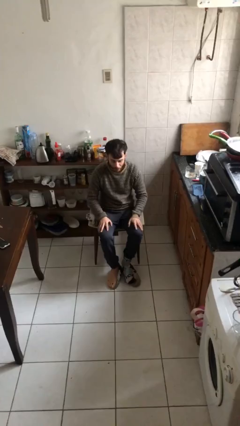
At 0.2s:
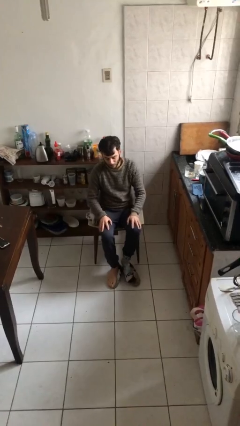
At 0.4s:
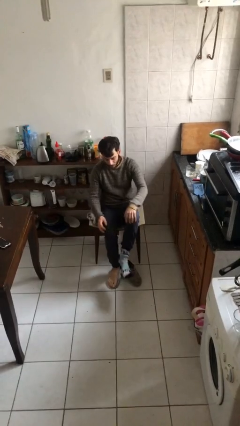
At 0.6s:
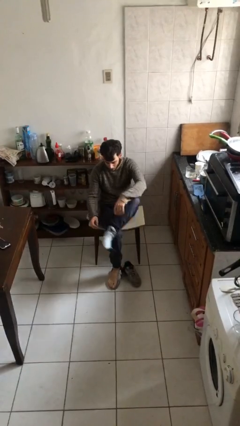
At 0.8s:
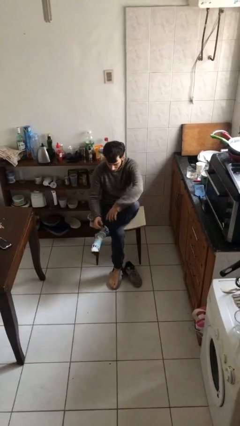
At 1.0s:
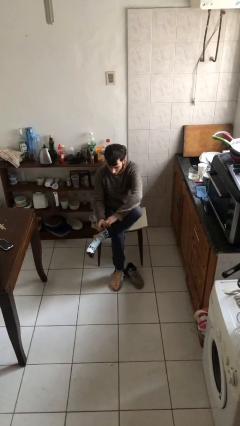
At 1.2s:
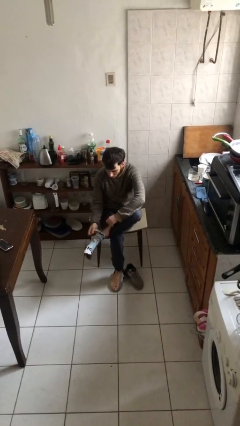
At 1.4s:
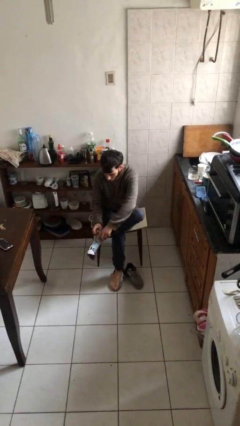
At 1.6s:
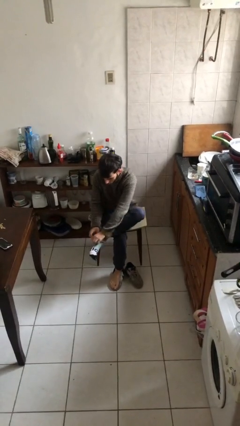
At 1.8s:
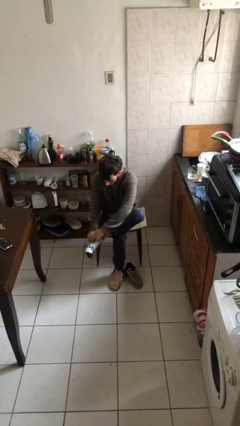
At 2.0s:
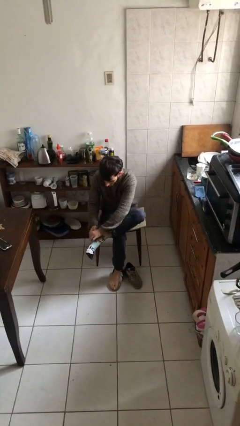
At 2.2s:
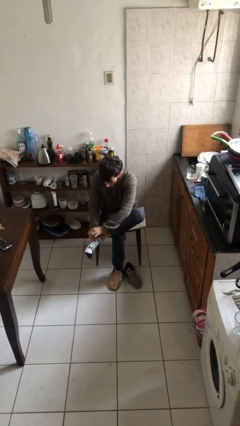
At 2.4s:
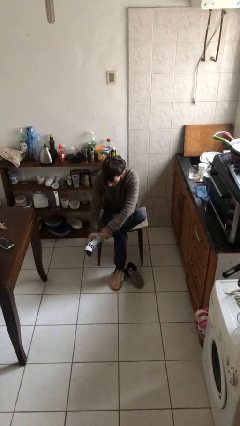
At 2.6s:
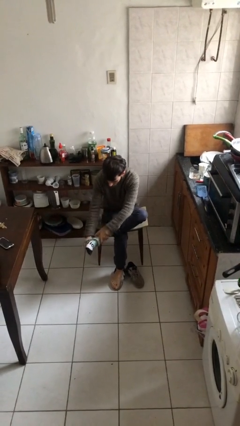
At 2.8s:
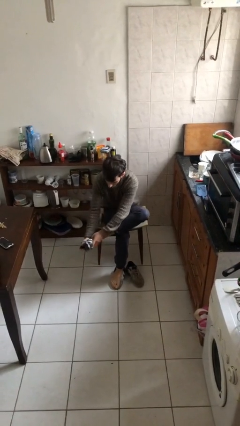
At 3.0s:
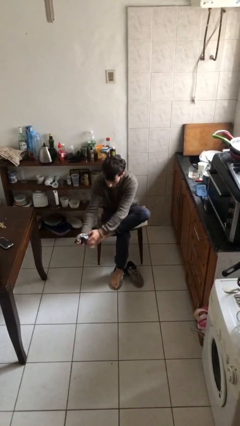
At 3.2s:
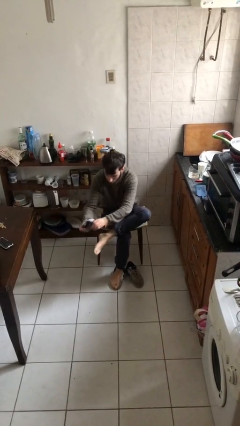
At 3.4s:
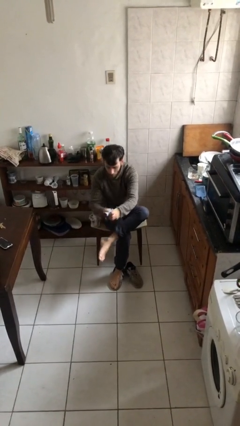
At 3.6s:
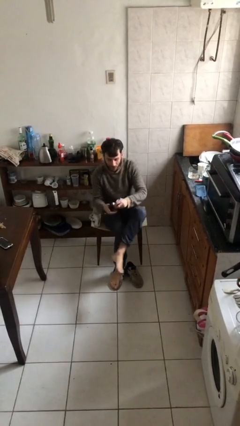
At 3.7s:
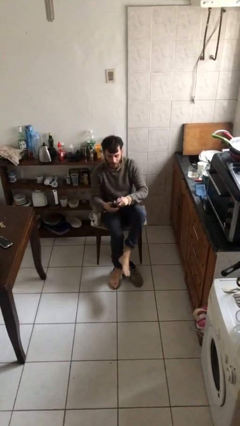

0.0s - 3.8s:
person takes off socks

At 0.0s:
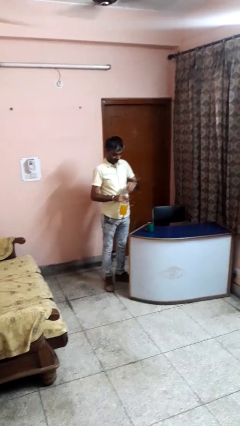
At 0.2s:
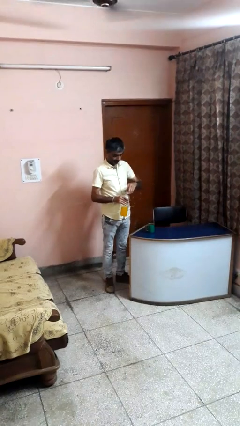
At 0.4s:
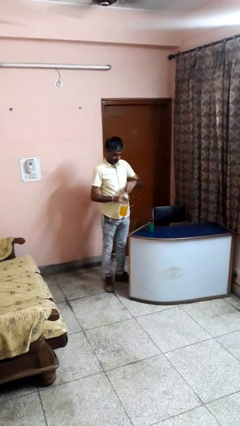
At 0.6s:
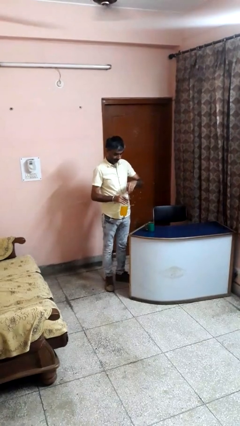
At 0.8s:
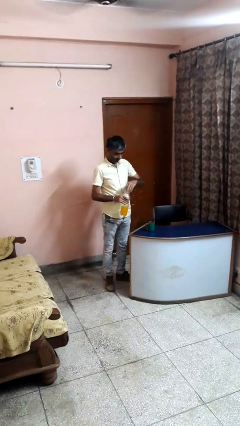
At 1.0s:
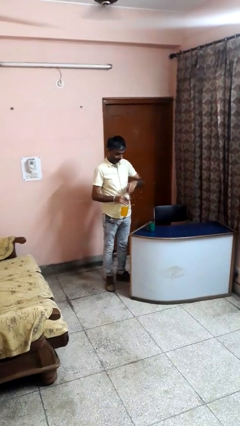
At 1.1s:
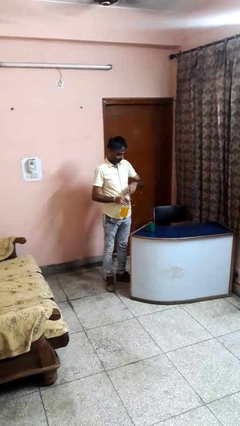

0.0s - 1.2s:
person unscrews lid from bottle

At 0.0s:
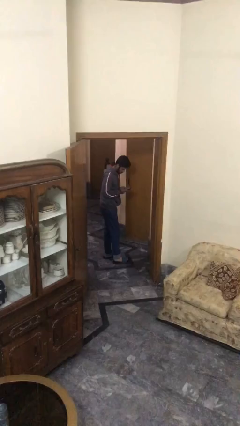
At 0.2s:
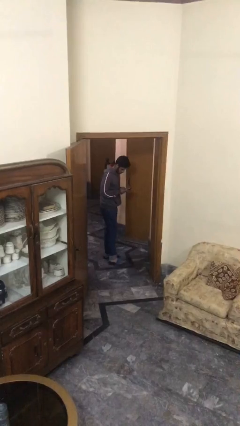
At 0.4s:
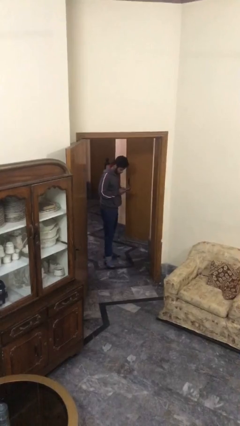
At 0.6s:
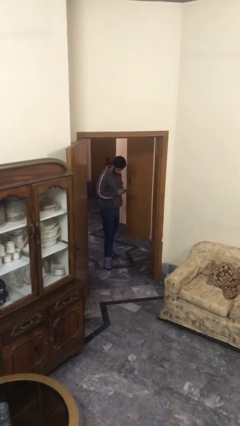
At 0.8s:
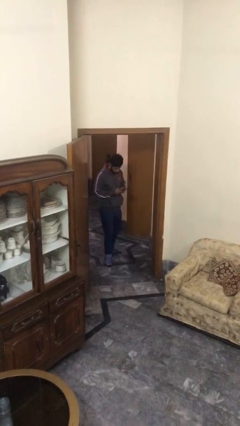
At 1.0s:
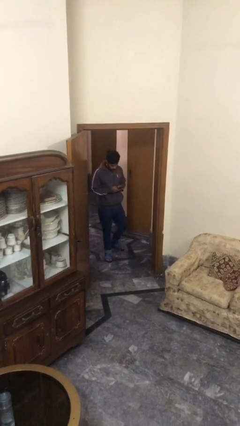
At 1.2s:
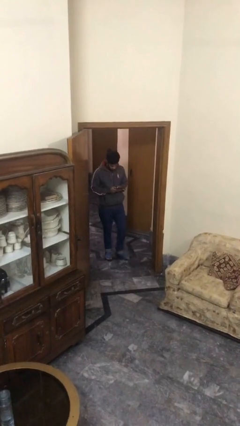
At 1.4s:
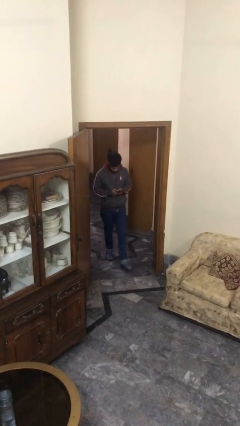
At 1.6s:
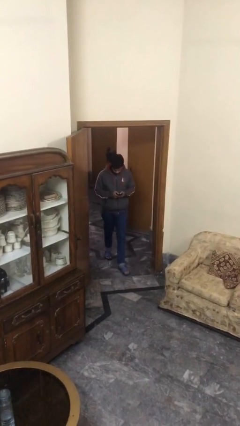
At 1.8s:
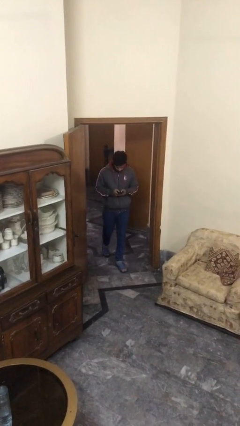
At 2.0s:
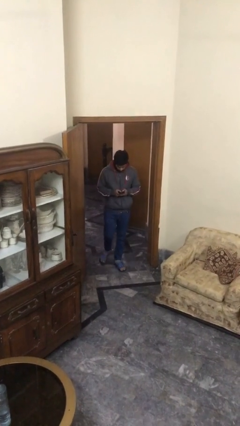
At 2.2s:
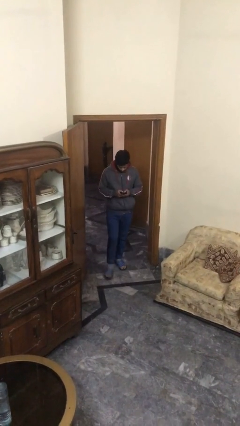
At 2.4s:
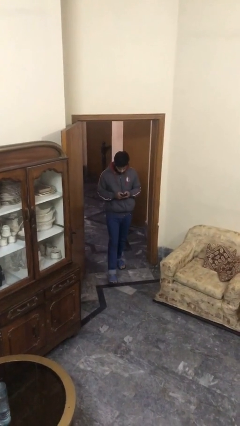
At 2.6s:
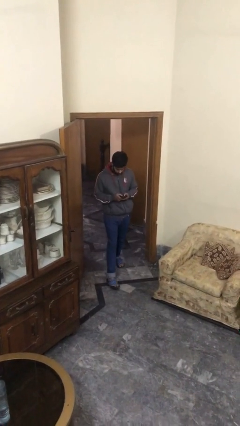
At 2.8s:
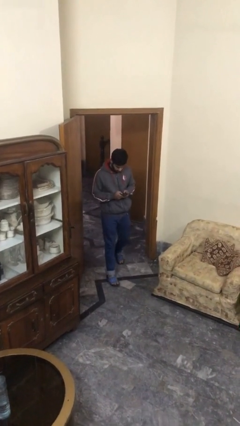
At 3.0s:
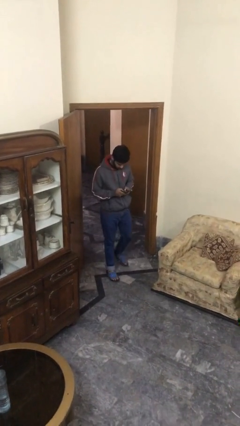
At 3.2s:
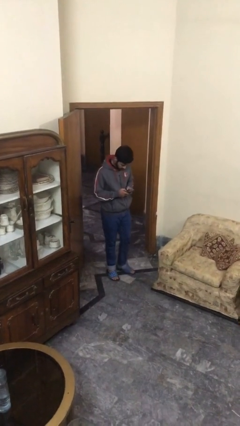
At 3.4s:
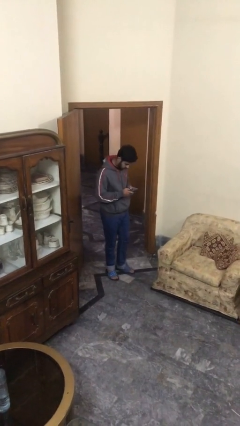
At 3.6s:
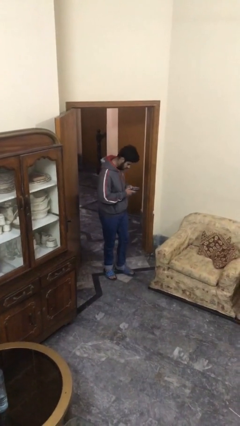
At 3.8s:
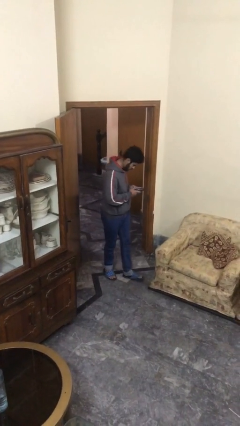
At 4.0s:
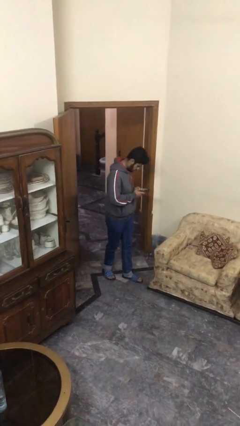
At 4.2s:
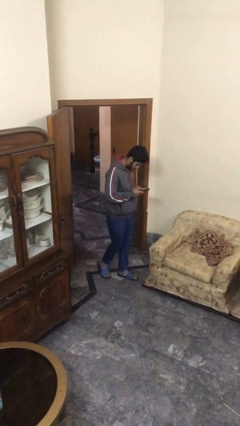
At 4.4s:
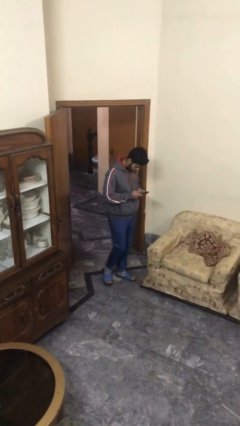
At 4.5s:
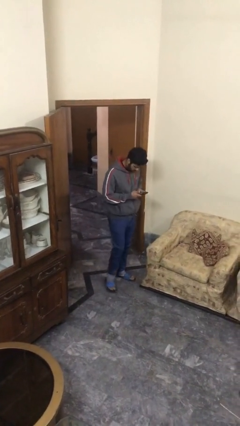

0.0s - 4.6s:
person enters scene through structure

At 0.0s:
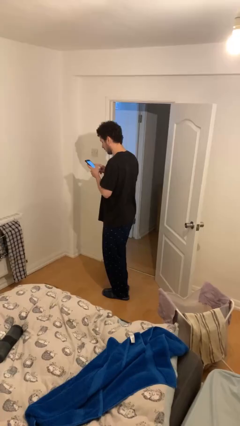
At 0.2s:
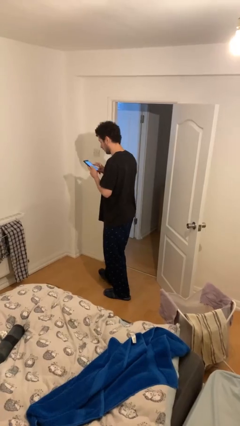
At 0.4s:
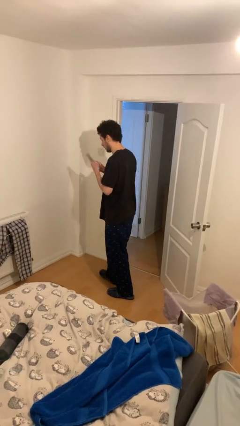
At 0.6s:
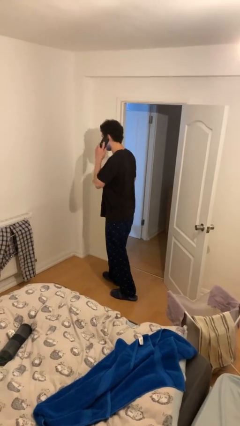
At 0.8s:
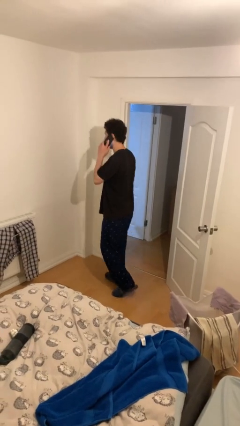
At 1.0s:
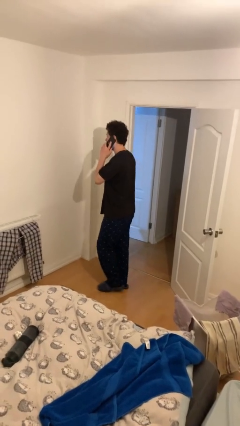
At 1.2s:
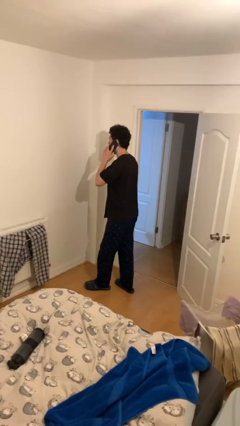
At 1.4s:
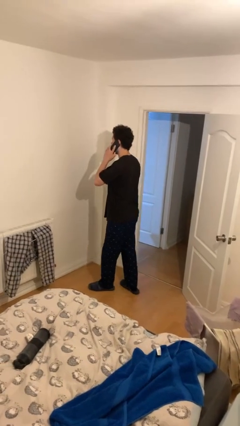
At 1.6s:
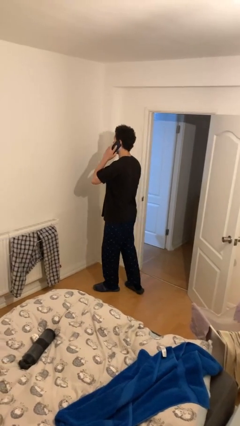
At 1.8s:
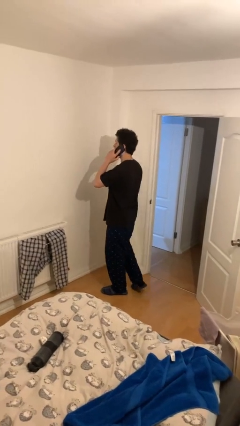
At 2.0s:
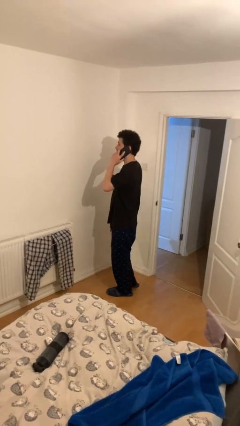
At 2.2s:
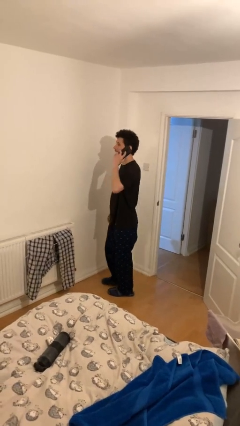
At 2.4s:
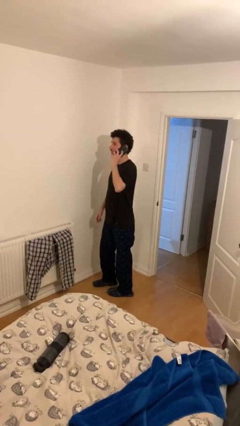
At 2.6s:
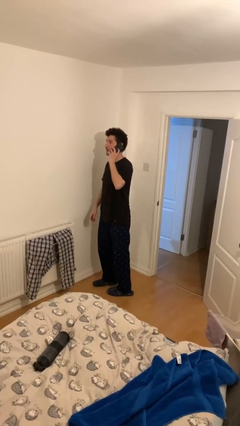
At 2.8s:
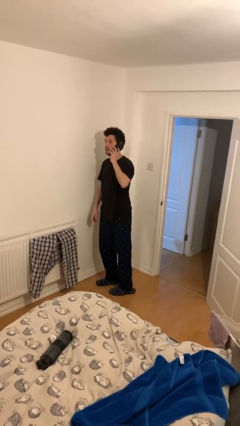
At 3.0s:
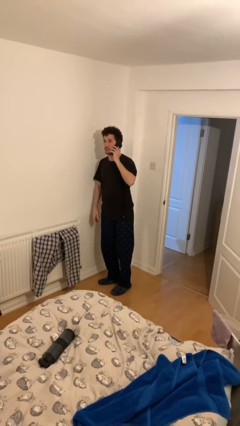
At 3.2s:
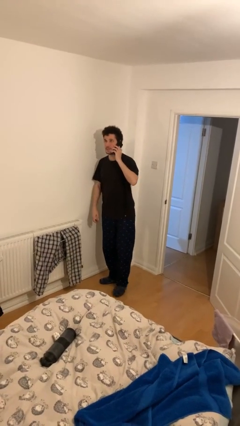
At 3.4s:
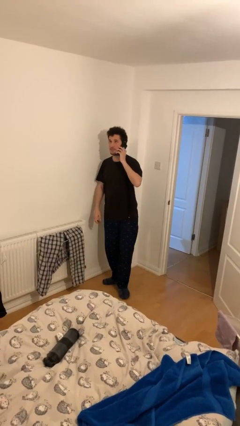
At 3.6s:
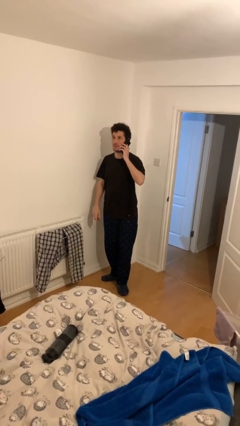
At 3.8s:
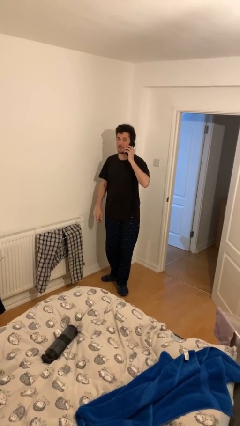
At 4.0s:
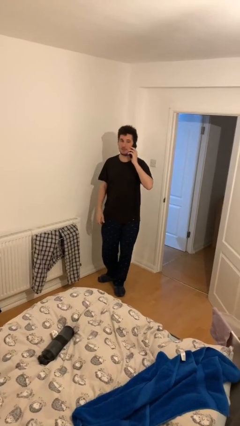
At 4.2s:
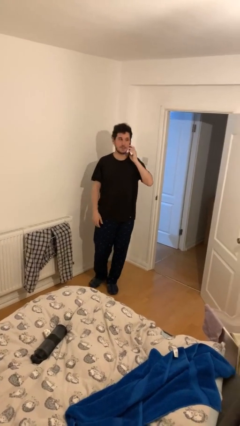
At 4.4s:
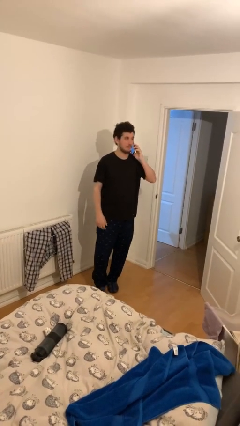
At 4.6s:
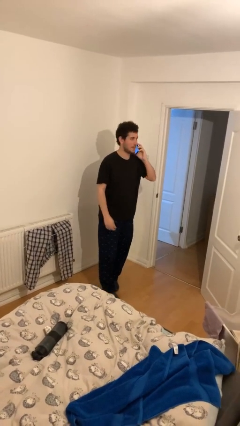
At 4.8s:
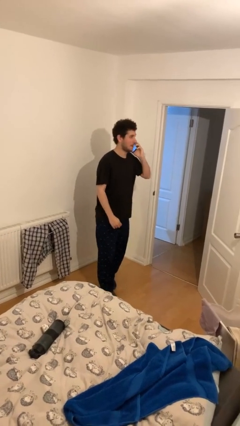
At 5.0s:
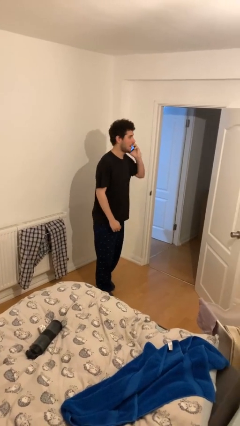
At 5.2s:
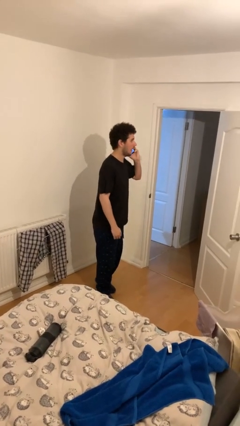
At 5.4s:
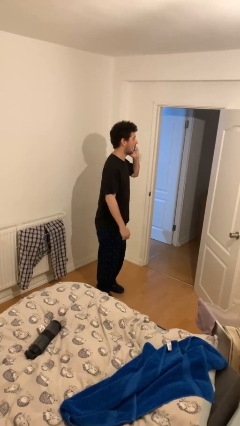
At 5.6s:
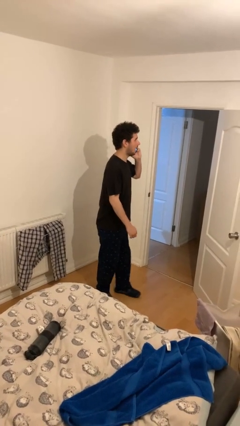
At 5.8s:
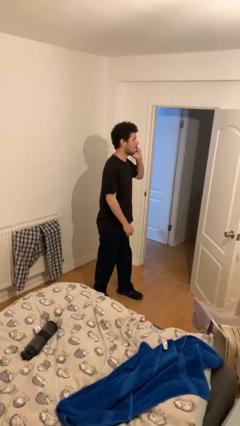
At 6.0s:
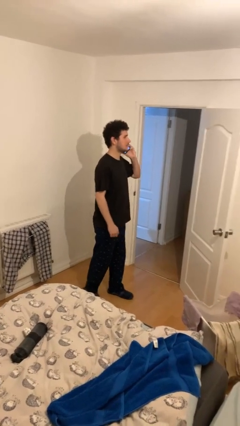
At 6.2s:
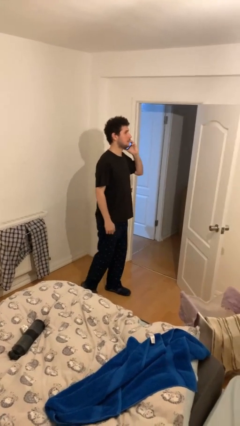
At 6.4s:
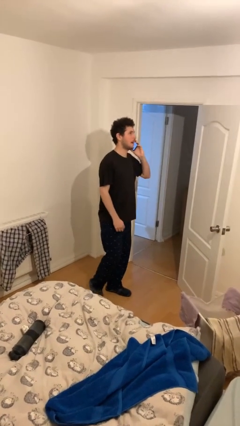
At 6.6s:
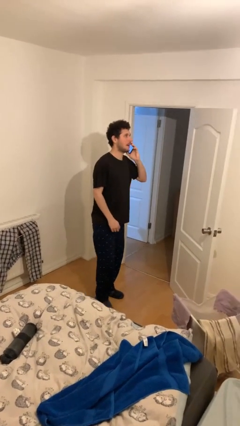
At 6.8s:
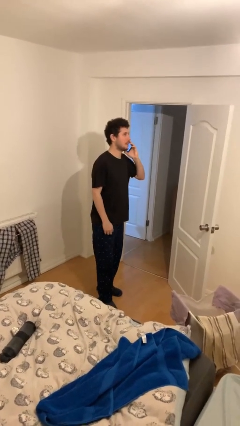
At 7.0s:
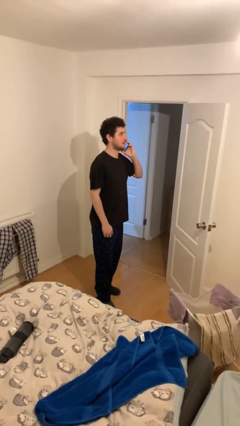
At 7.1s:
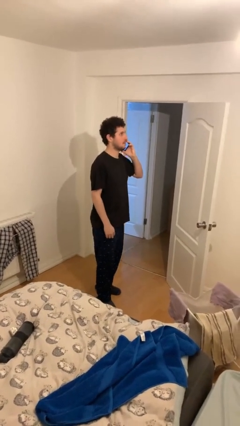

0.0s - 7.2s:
person talks on phone

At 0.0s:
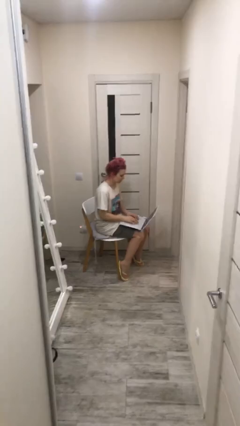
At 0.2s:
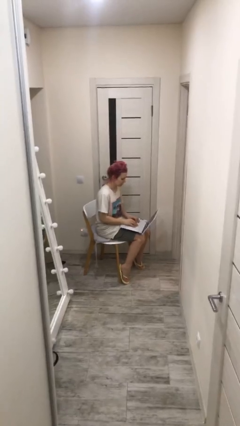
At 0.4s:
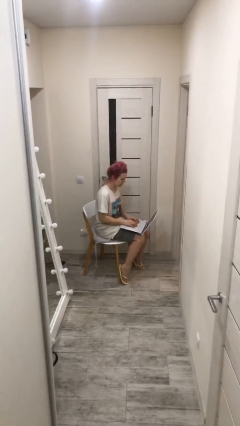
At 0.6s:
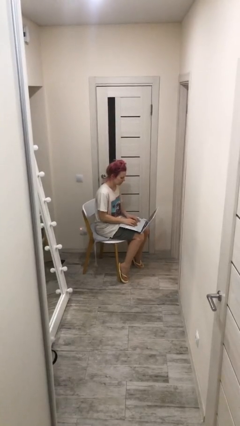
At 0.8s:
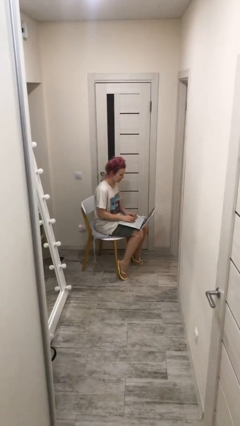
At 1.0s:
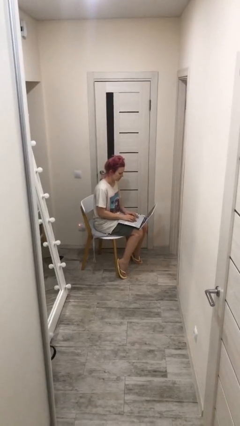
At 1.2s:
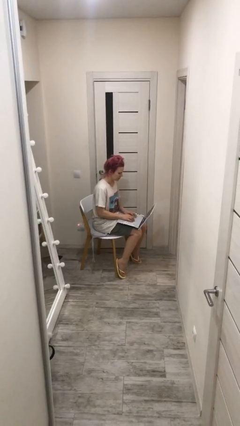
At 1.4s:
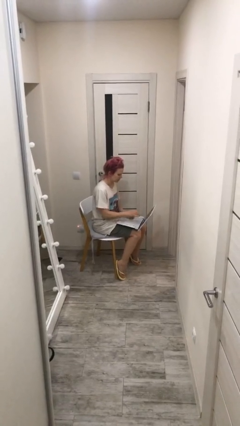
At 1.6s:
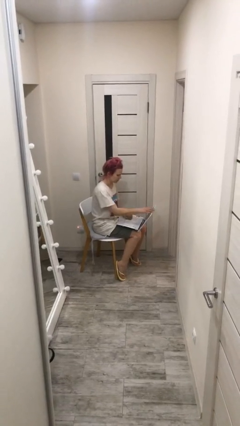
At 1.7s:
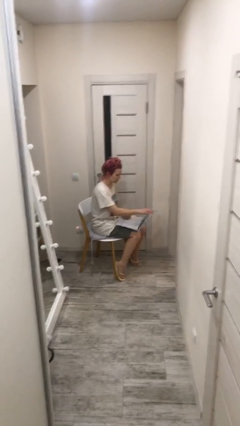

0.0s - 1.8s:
person interacts with laptop
